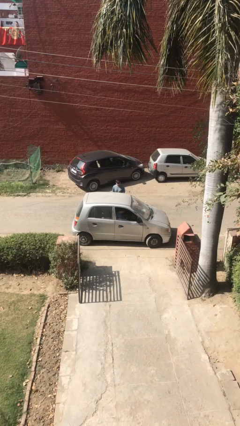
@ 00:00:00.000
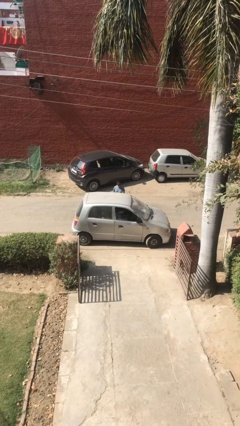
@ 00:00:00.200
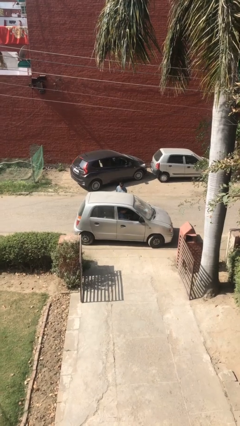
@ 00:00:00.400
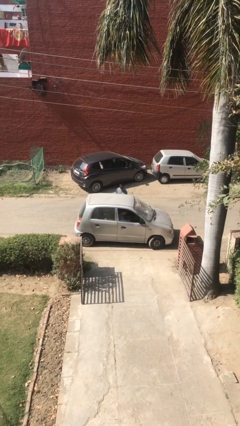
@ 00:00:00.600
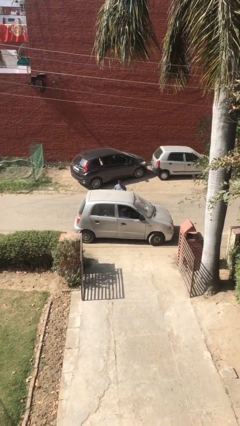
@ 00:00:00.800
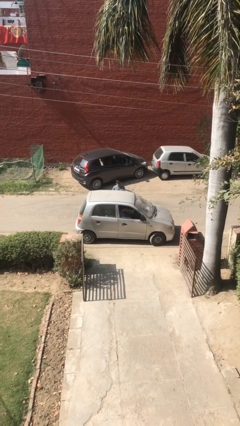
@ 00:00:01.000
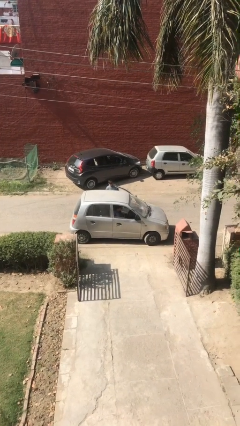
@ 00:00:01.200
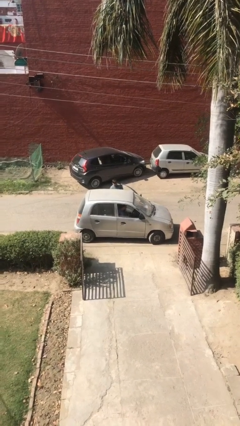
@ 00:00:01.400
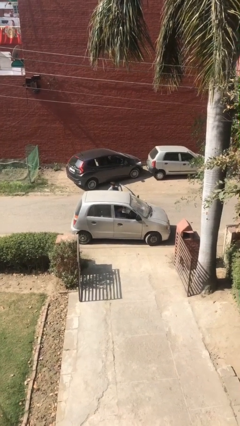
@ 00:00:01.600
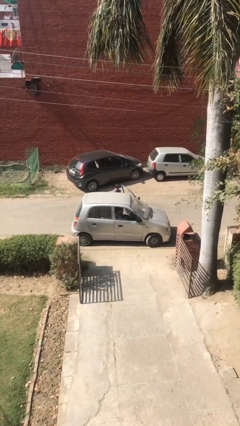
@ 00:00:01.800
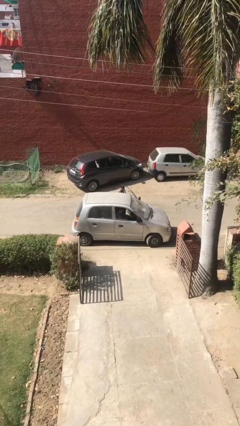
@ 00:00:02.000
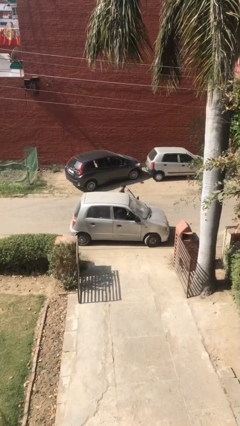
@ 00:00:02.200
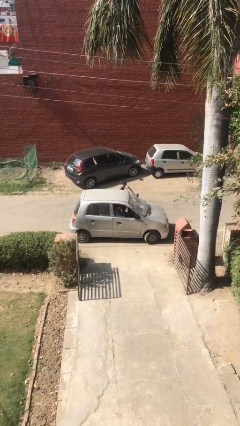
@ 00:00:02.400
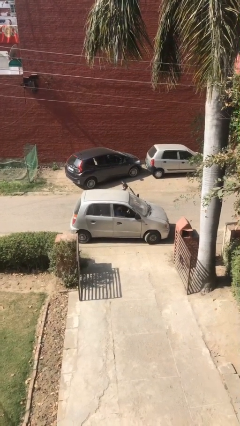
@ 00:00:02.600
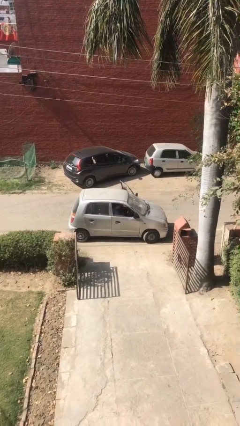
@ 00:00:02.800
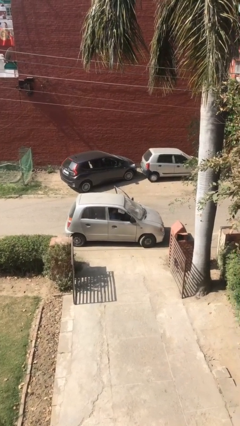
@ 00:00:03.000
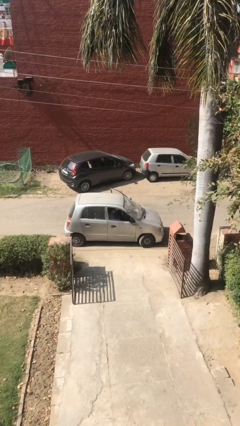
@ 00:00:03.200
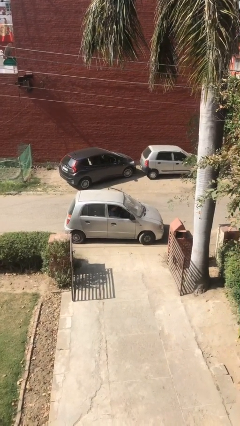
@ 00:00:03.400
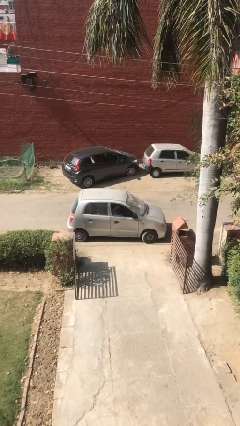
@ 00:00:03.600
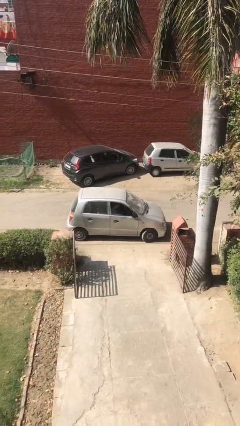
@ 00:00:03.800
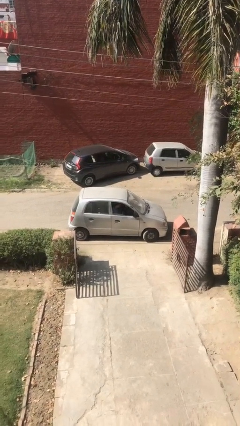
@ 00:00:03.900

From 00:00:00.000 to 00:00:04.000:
car picks up person

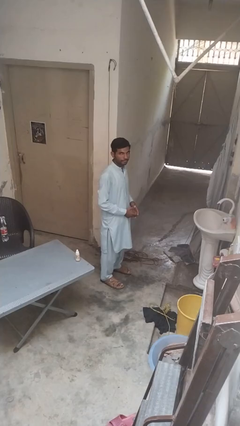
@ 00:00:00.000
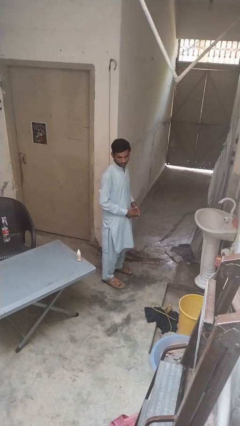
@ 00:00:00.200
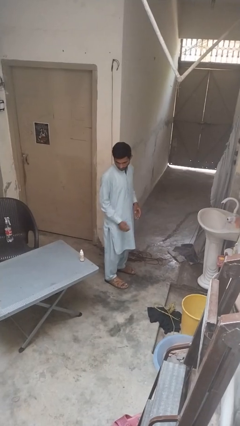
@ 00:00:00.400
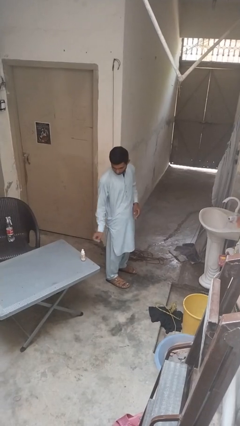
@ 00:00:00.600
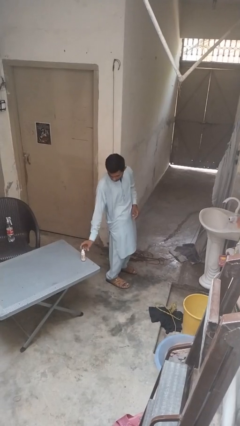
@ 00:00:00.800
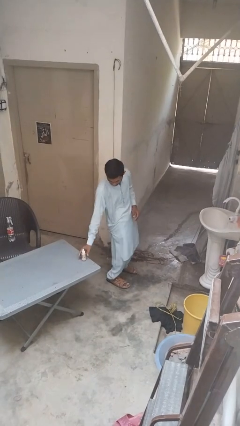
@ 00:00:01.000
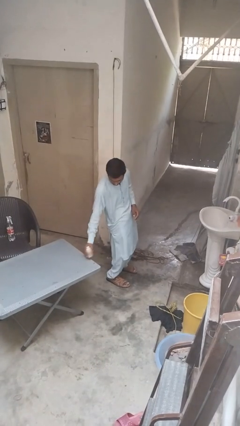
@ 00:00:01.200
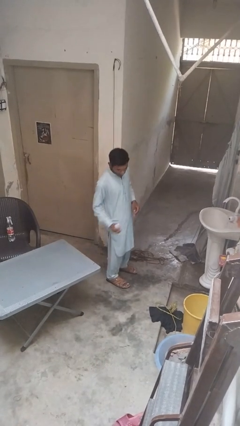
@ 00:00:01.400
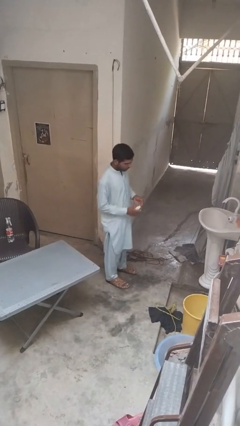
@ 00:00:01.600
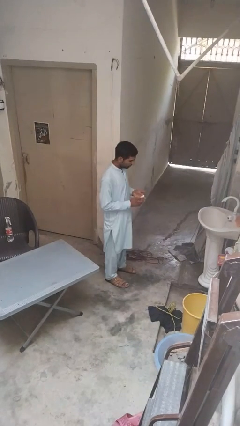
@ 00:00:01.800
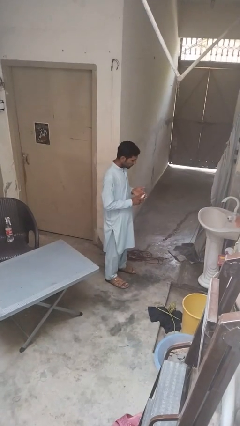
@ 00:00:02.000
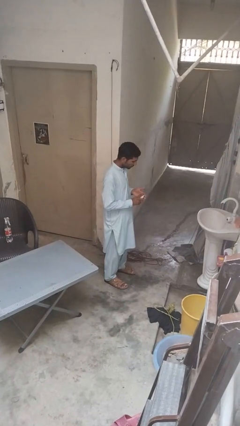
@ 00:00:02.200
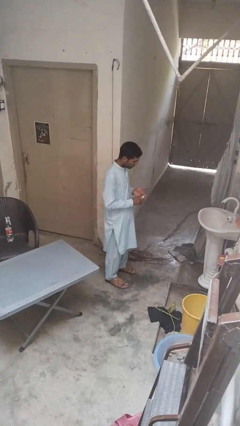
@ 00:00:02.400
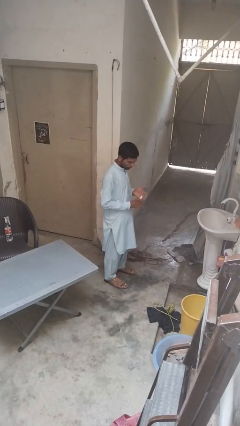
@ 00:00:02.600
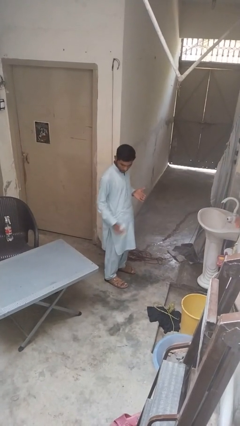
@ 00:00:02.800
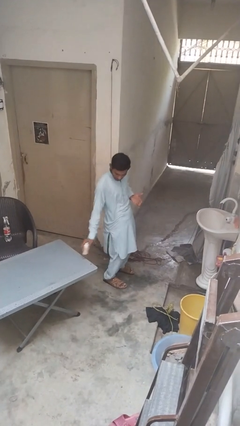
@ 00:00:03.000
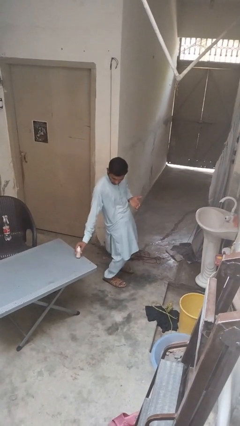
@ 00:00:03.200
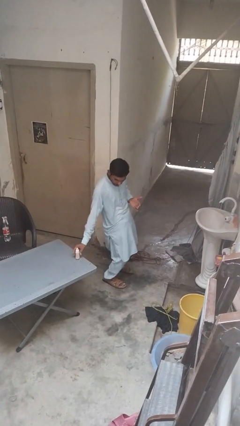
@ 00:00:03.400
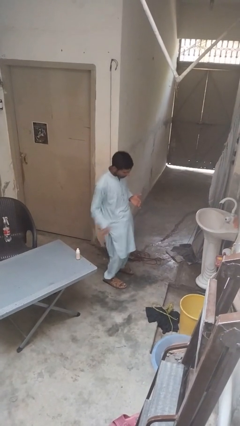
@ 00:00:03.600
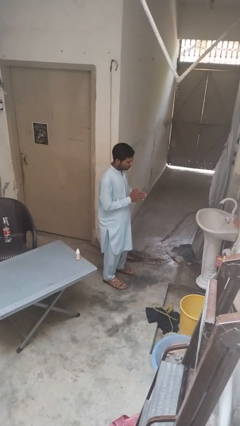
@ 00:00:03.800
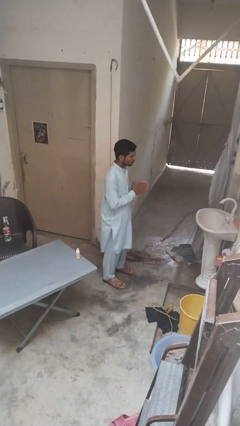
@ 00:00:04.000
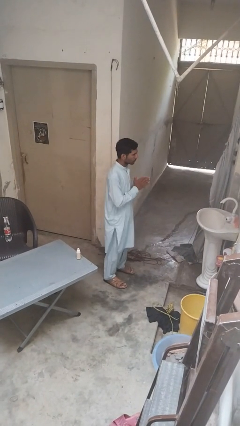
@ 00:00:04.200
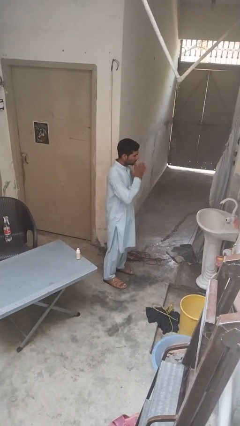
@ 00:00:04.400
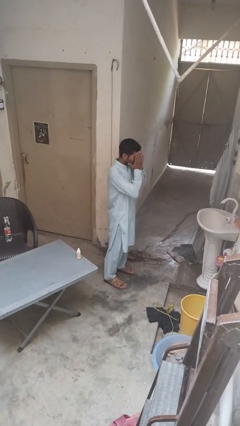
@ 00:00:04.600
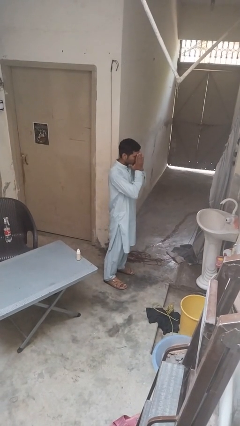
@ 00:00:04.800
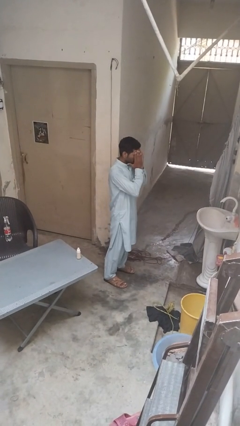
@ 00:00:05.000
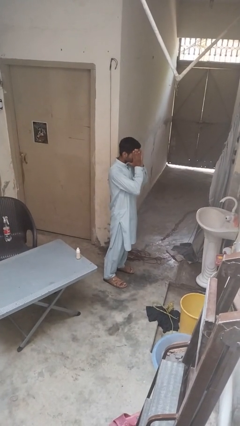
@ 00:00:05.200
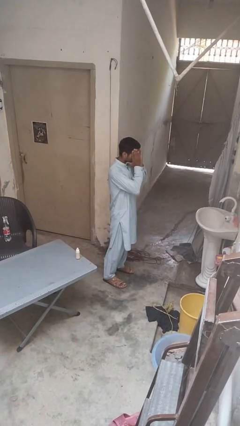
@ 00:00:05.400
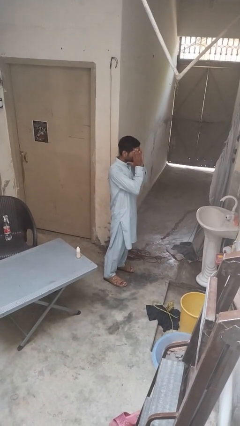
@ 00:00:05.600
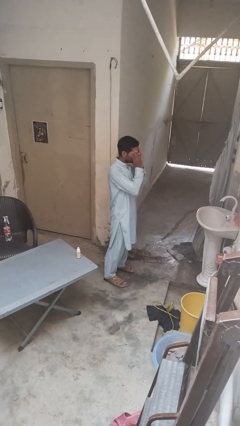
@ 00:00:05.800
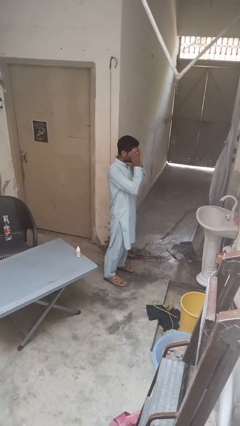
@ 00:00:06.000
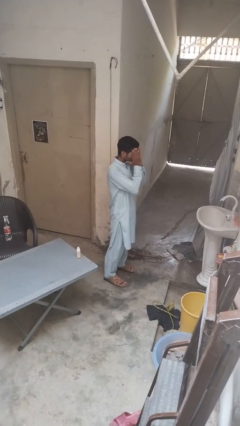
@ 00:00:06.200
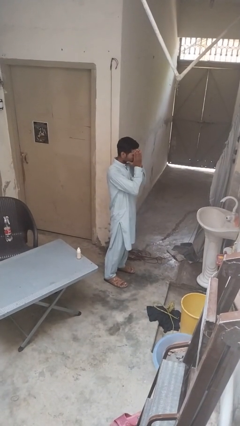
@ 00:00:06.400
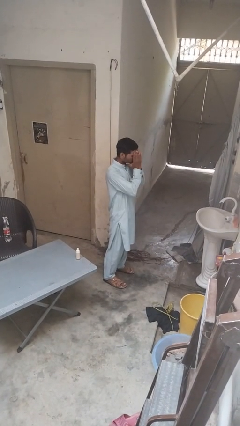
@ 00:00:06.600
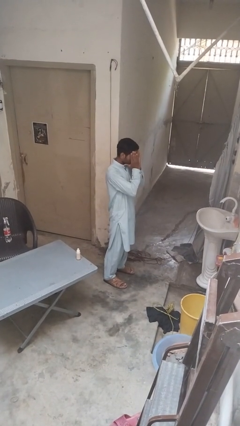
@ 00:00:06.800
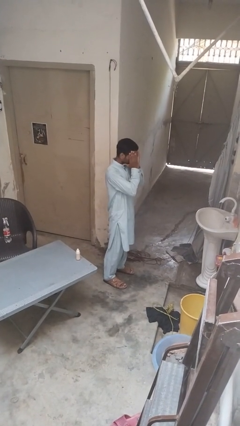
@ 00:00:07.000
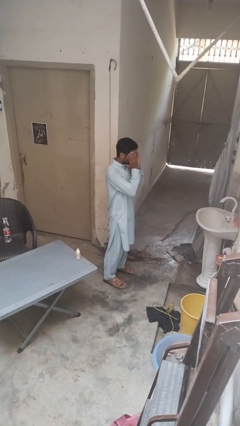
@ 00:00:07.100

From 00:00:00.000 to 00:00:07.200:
person applies foundation makeup

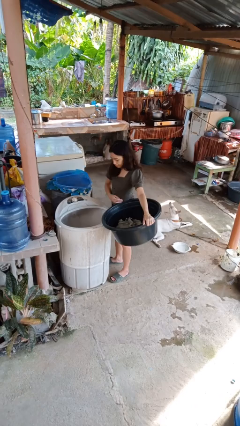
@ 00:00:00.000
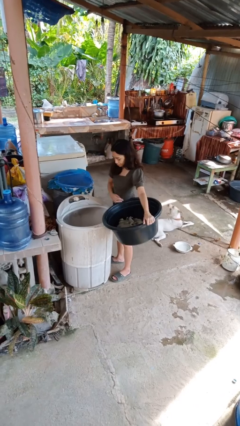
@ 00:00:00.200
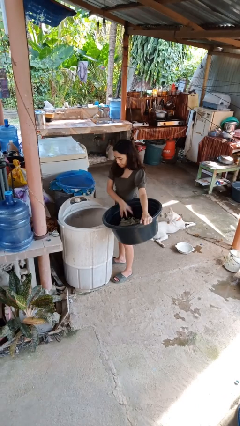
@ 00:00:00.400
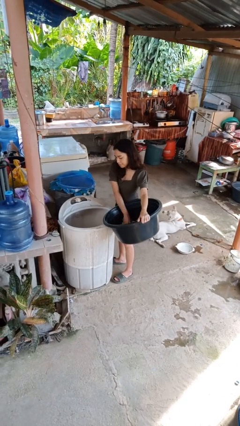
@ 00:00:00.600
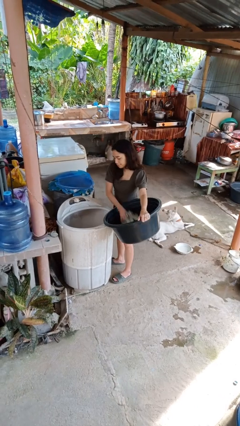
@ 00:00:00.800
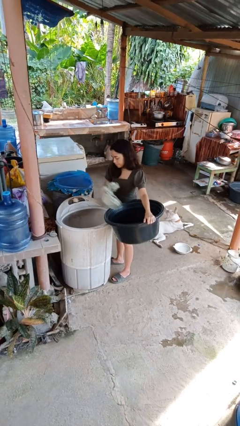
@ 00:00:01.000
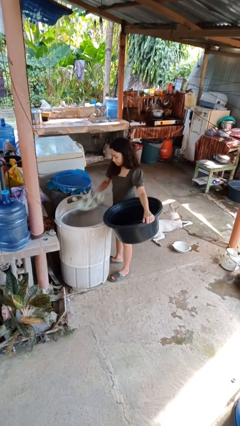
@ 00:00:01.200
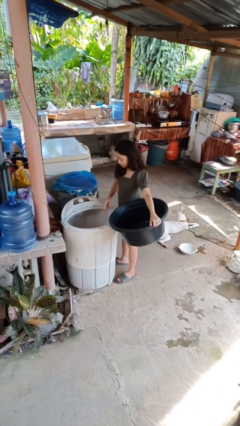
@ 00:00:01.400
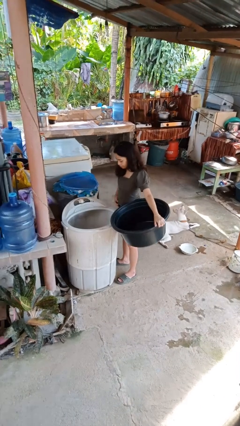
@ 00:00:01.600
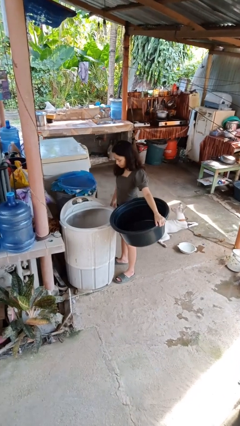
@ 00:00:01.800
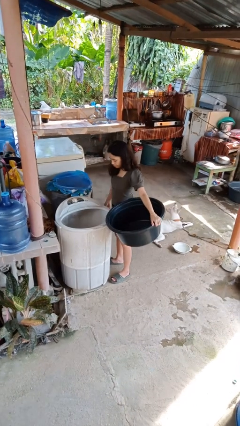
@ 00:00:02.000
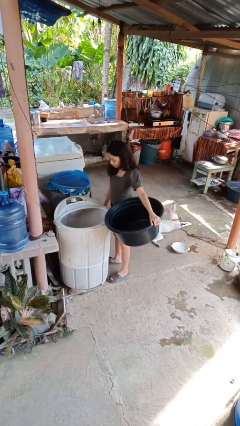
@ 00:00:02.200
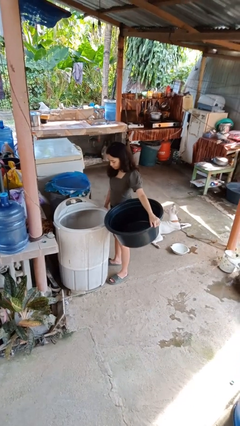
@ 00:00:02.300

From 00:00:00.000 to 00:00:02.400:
person loads clotheswasher

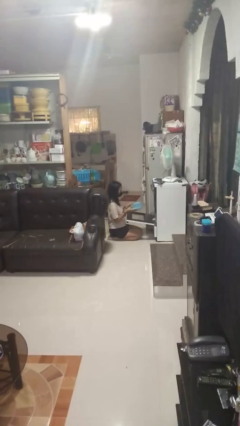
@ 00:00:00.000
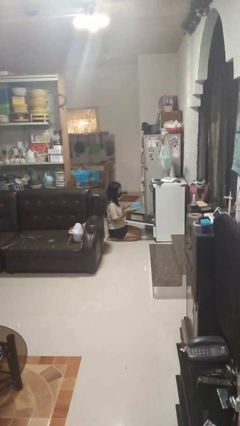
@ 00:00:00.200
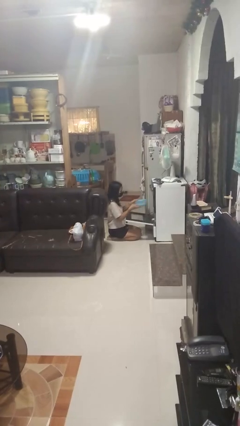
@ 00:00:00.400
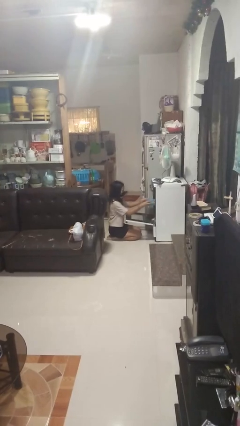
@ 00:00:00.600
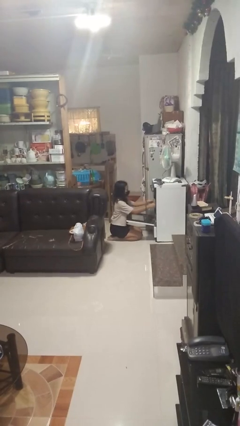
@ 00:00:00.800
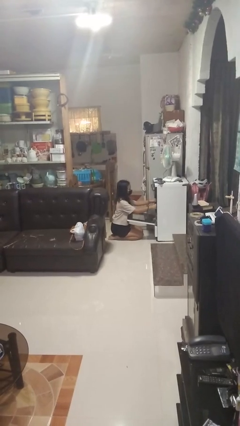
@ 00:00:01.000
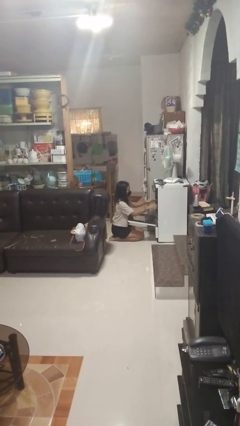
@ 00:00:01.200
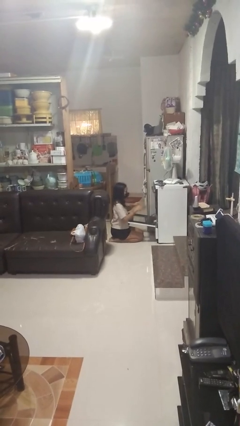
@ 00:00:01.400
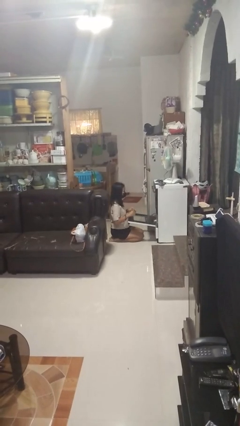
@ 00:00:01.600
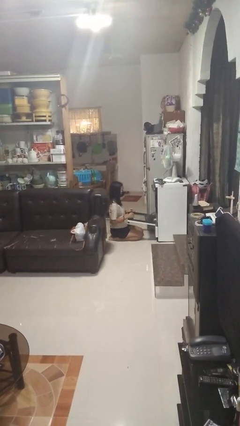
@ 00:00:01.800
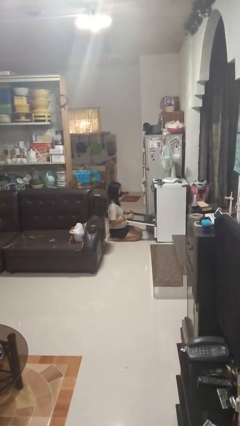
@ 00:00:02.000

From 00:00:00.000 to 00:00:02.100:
person puts object into oven

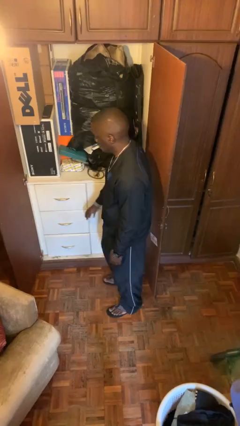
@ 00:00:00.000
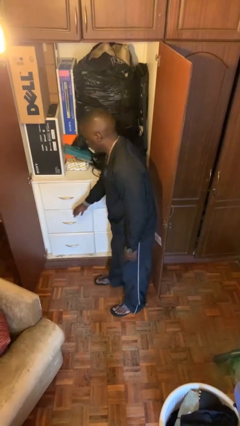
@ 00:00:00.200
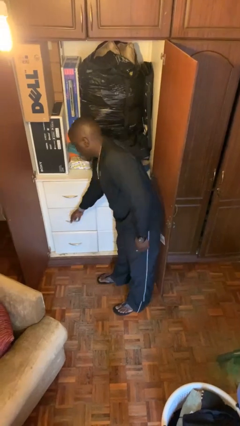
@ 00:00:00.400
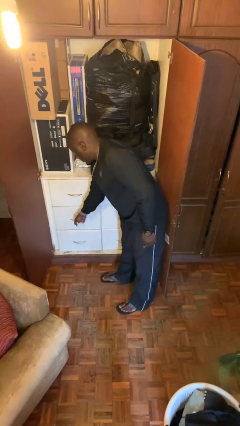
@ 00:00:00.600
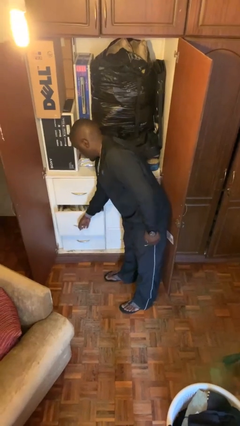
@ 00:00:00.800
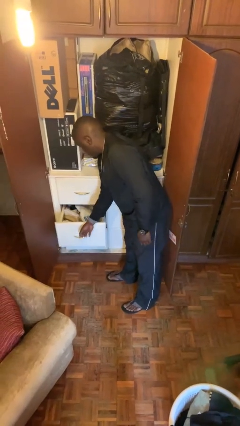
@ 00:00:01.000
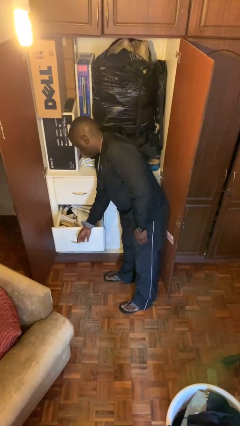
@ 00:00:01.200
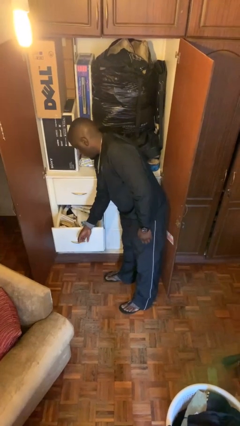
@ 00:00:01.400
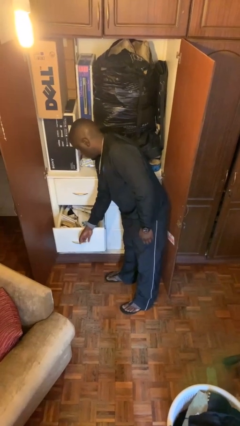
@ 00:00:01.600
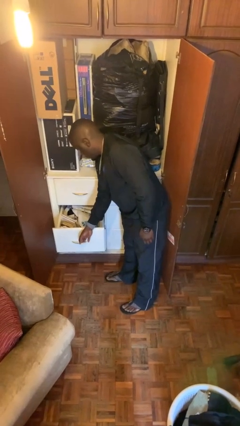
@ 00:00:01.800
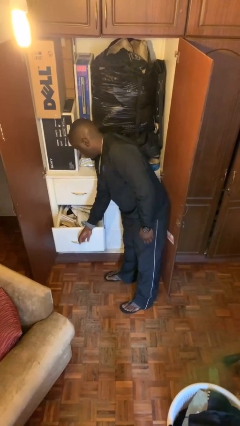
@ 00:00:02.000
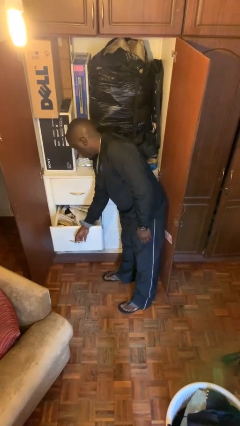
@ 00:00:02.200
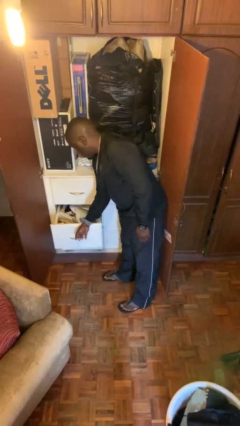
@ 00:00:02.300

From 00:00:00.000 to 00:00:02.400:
person opens dresser drawer
